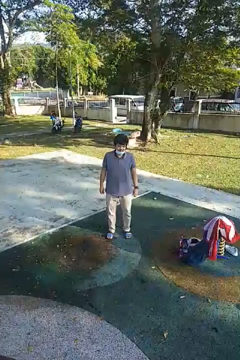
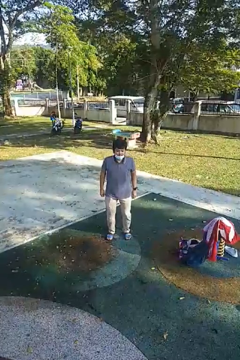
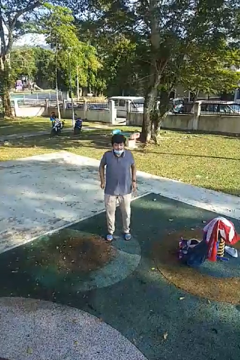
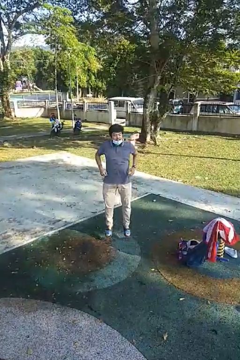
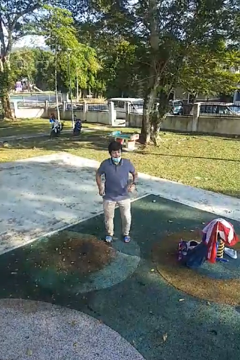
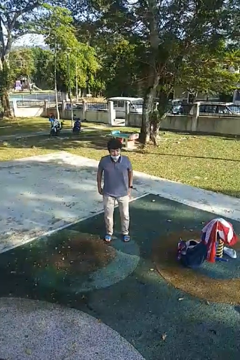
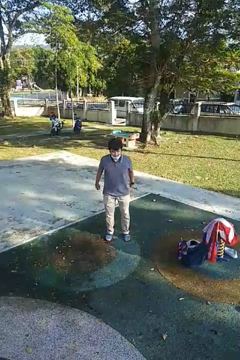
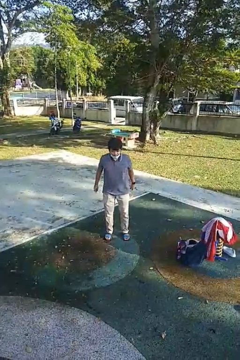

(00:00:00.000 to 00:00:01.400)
person jumps

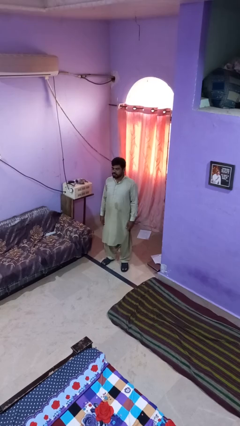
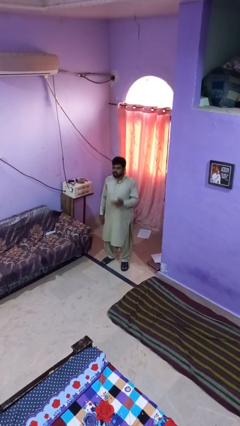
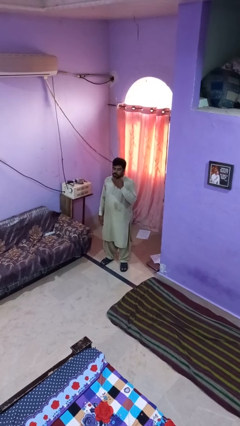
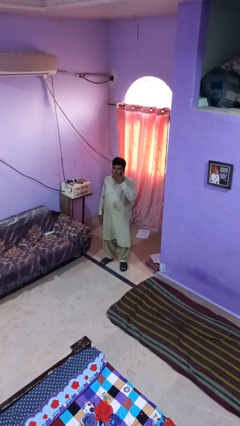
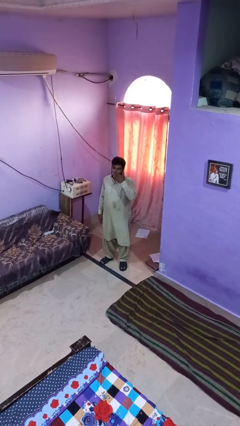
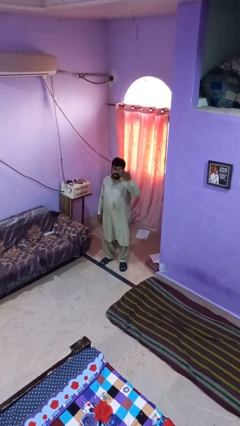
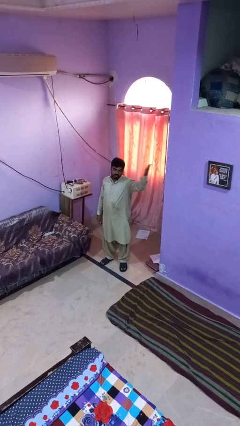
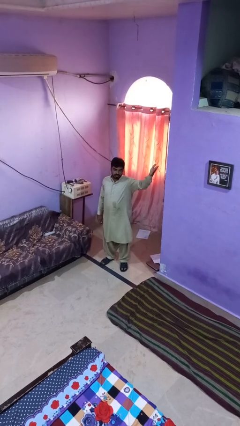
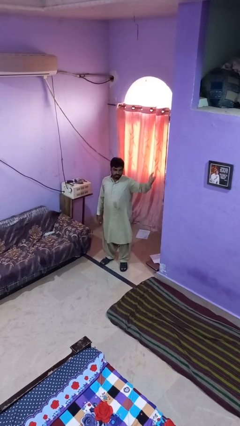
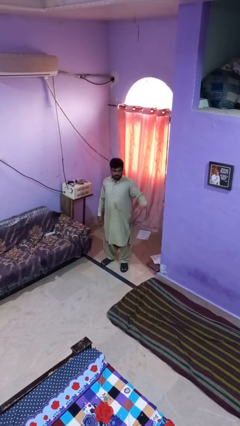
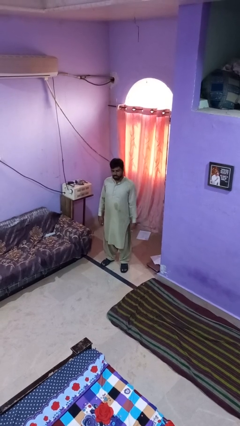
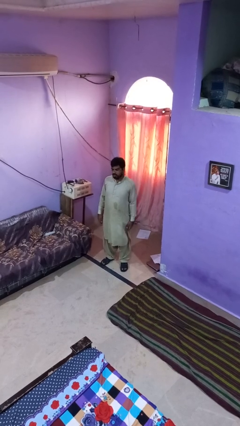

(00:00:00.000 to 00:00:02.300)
person gestures blow kiss

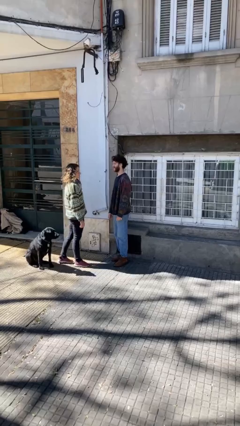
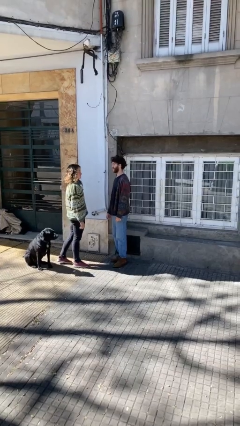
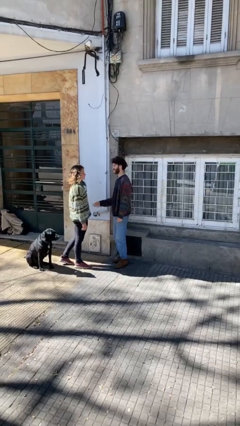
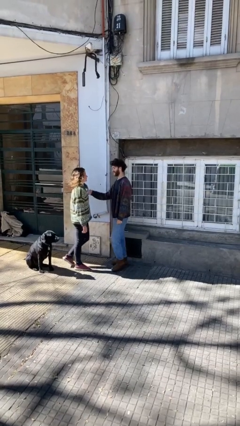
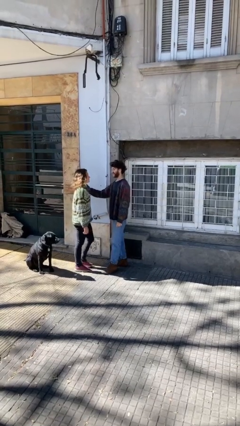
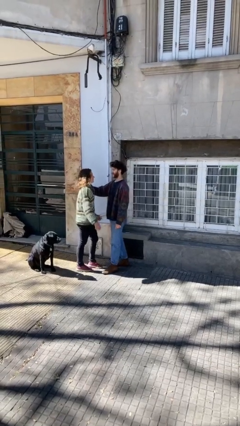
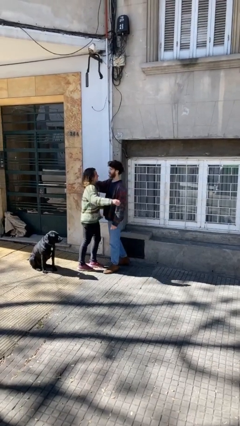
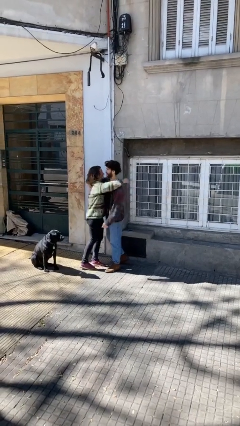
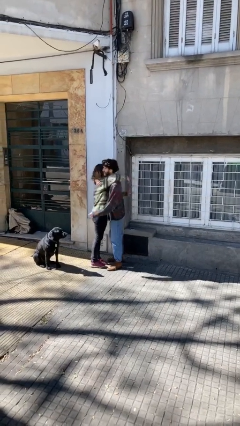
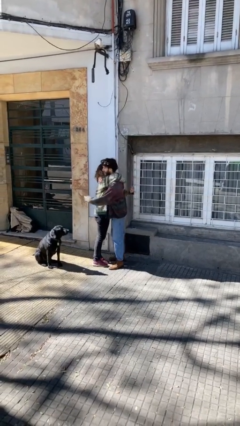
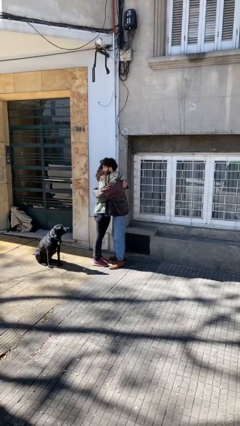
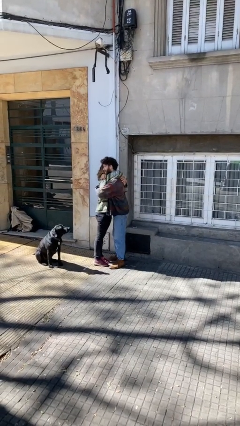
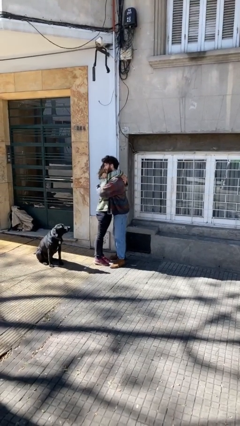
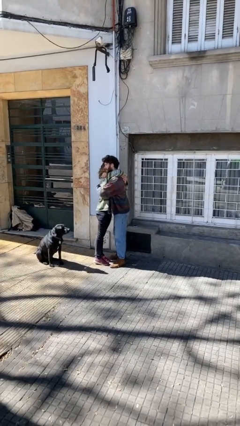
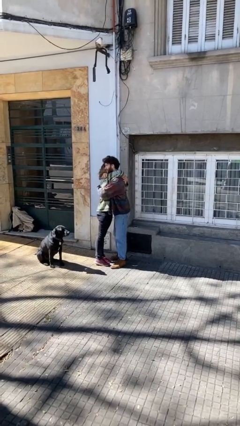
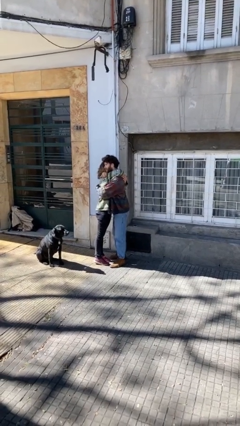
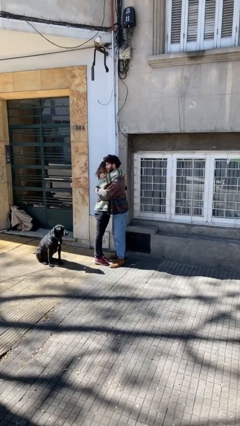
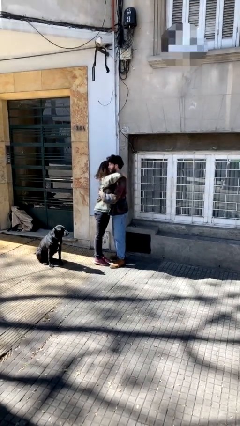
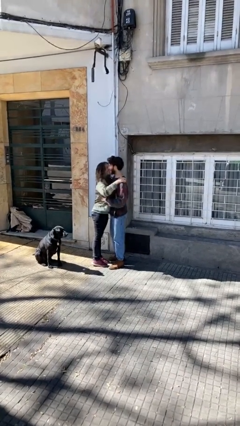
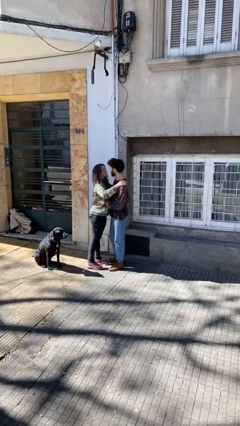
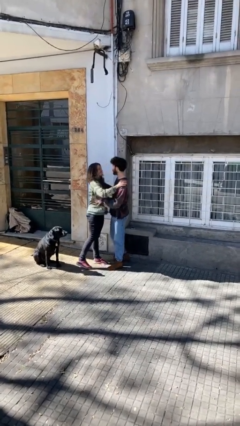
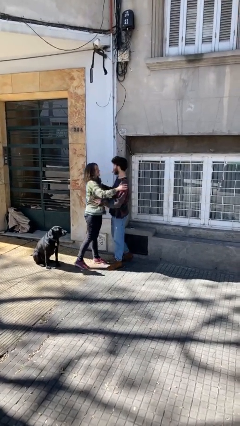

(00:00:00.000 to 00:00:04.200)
person embraces person

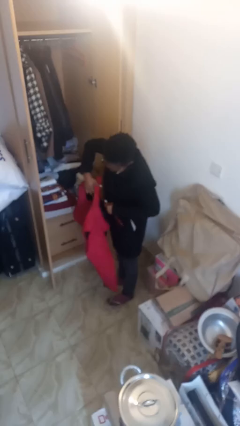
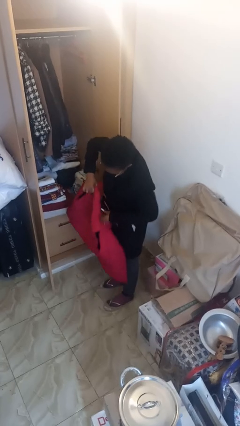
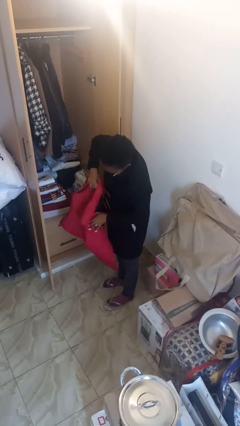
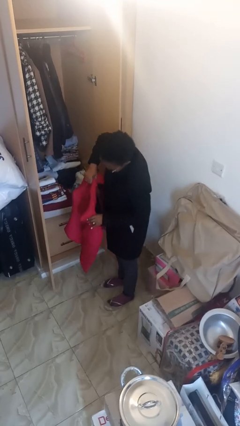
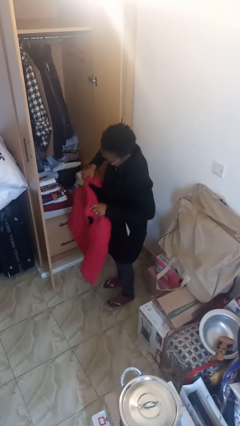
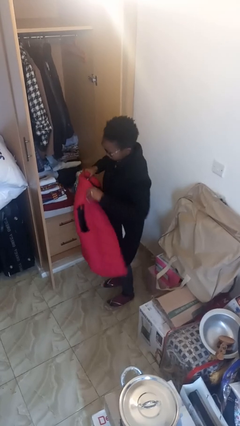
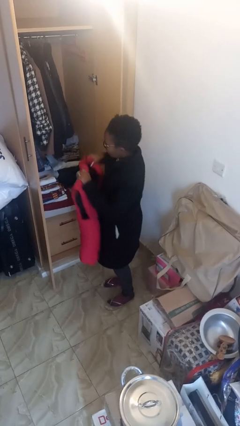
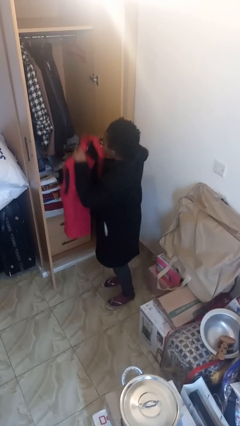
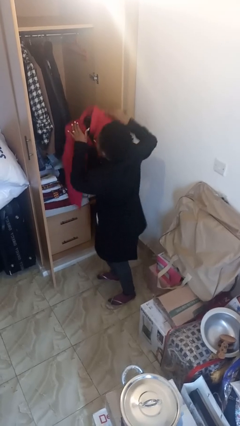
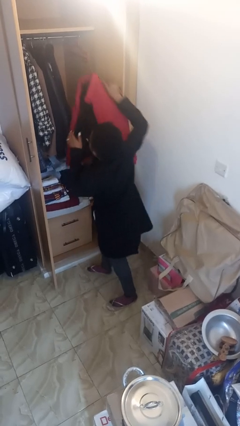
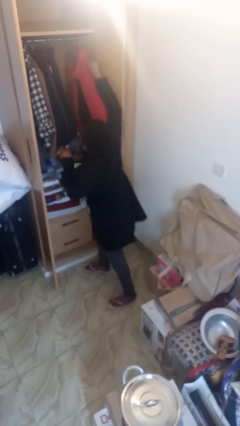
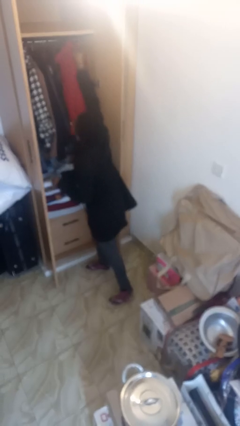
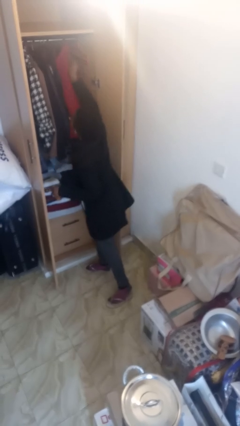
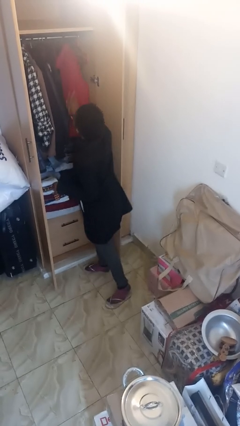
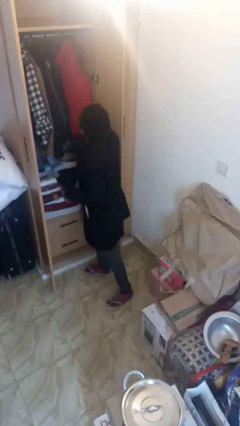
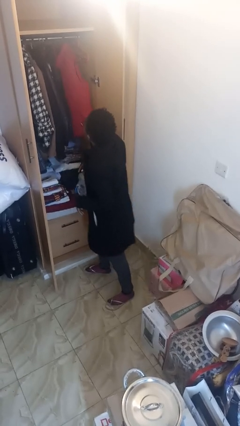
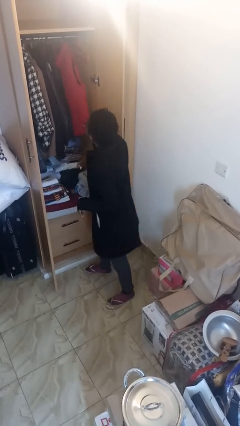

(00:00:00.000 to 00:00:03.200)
person puts clothes into closet

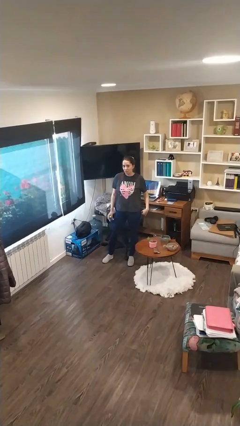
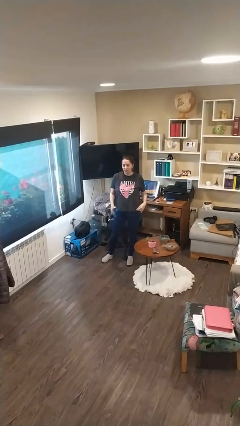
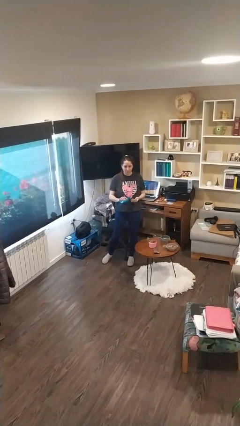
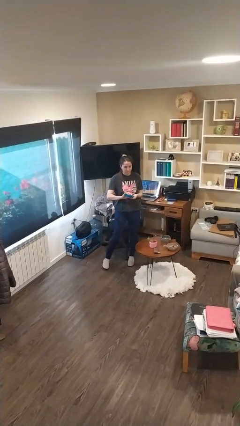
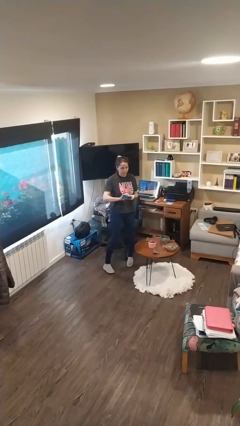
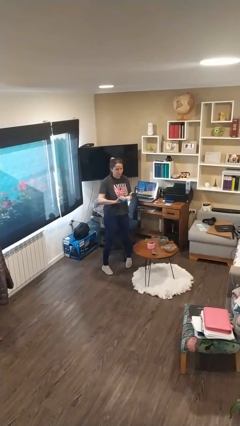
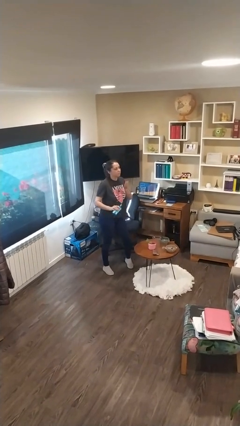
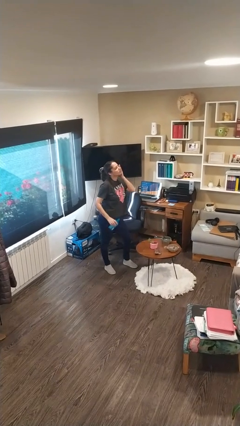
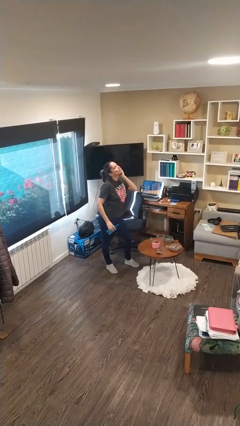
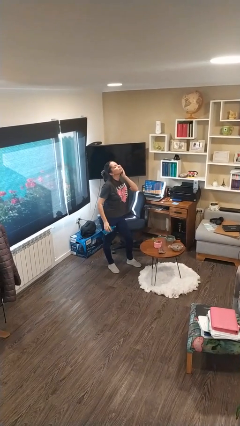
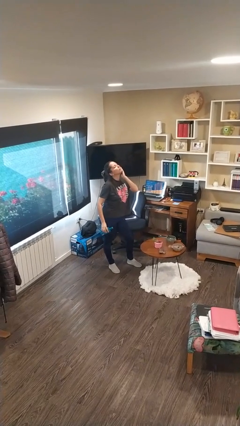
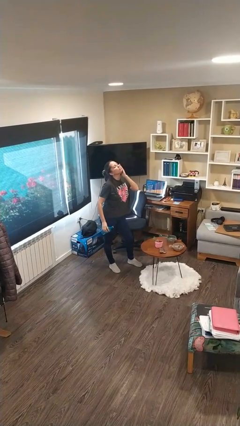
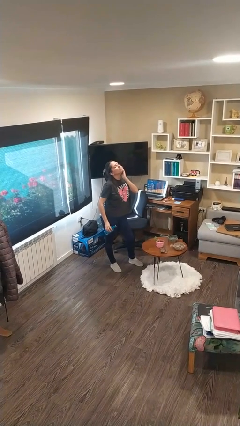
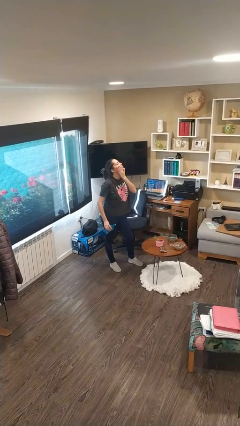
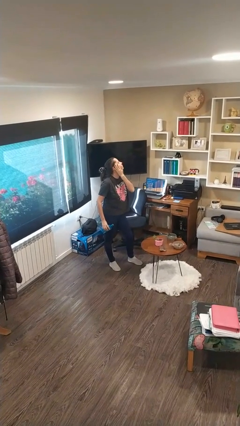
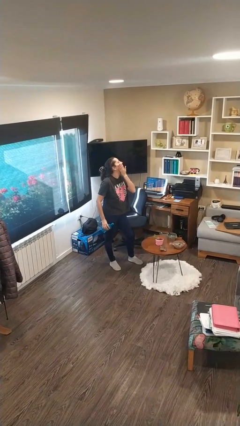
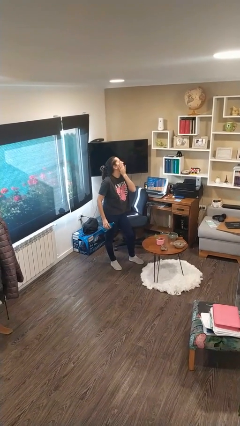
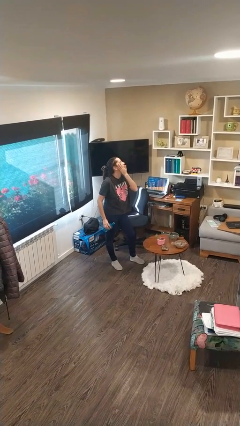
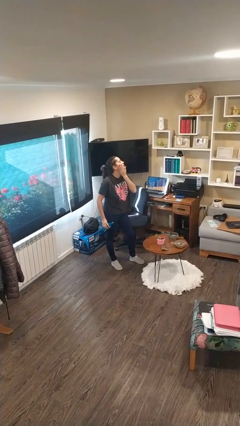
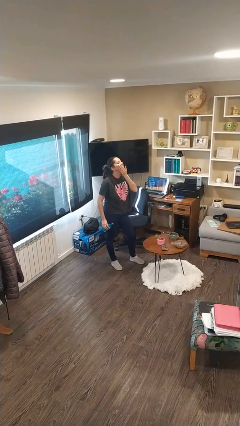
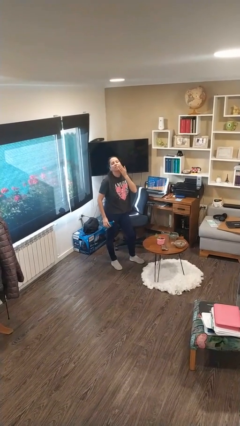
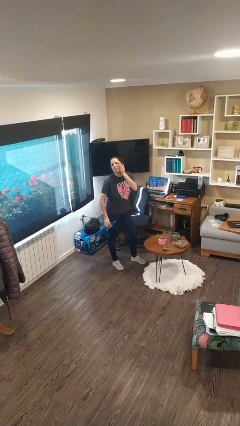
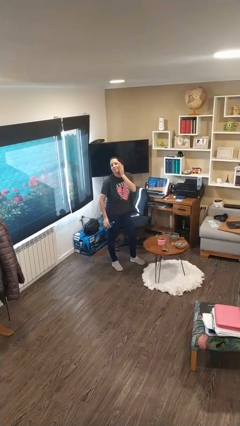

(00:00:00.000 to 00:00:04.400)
person applies facial moisturizer

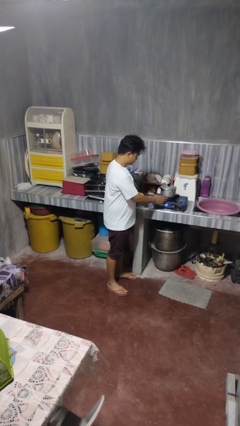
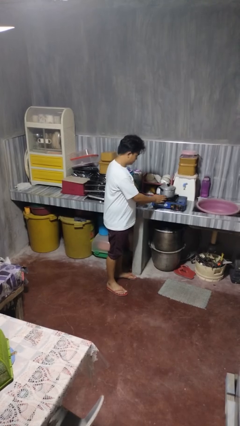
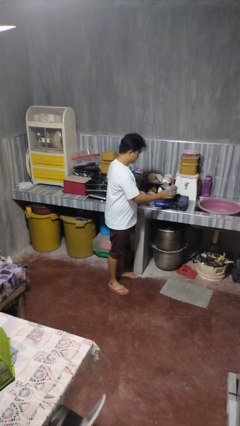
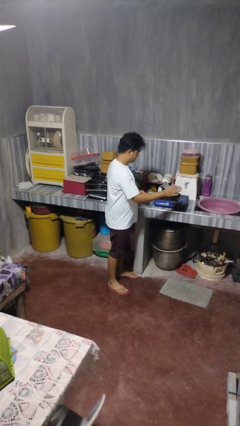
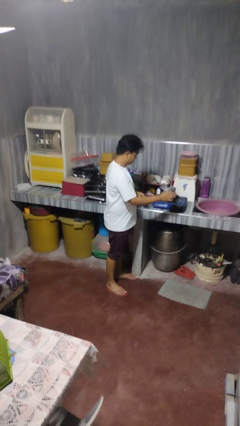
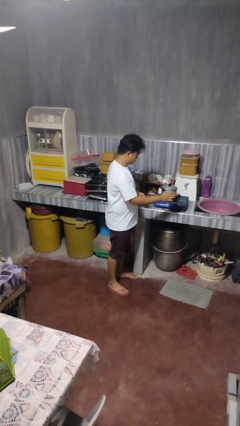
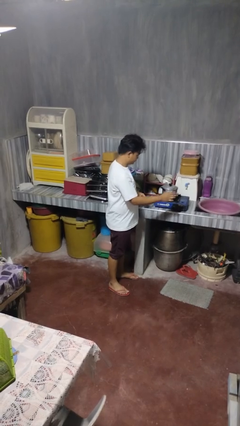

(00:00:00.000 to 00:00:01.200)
person burns hand
